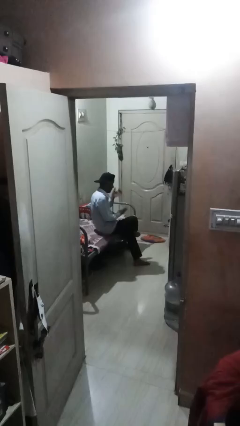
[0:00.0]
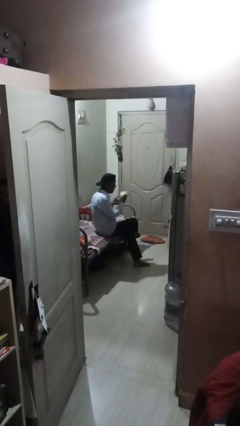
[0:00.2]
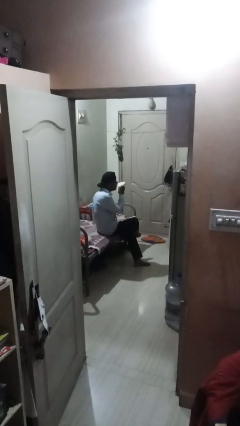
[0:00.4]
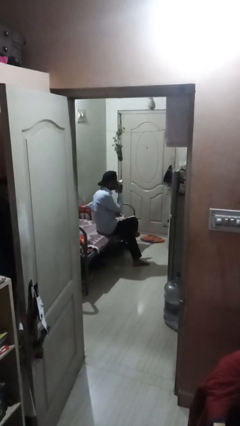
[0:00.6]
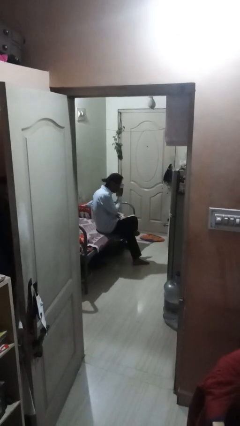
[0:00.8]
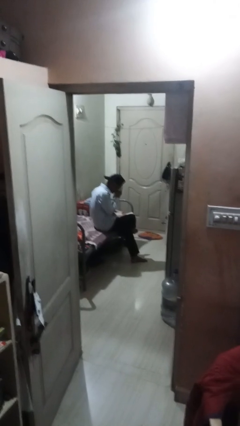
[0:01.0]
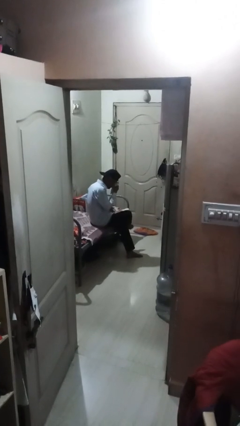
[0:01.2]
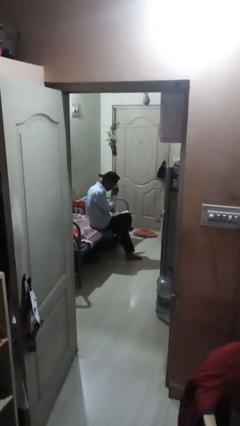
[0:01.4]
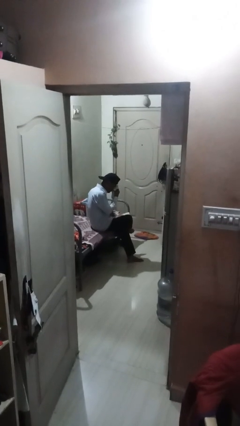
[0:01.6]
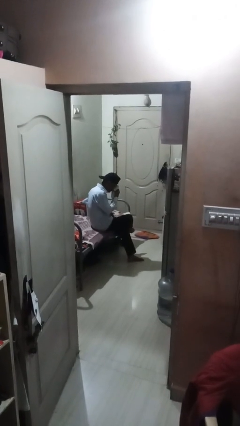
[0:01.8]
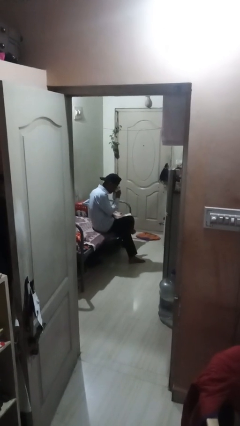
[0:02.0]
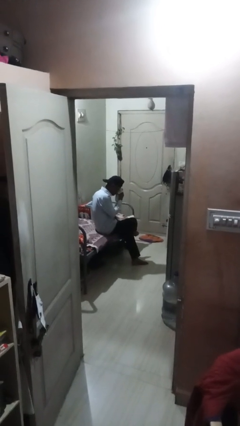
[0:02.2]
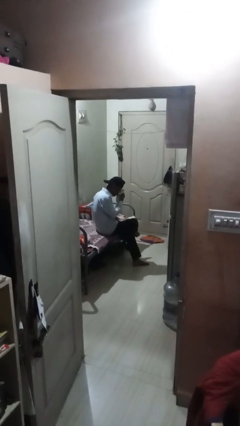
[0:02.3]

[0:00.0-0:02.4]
person blows nose

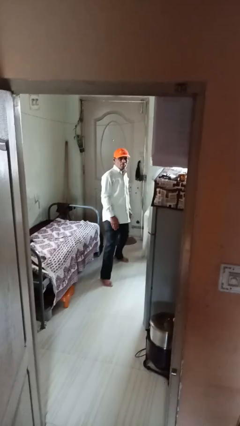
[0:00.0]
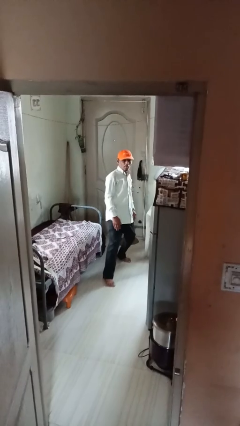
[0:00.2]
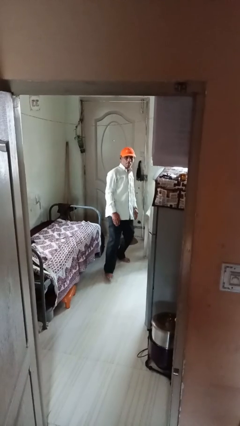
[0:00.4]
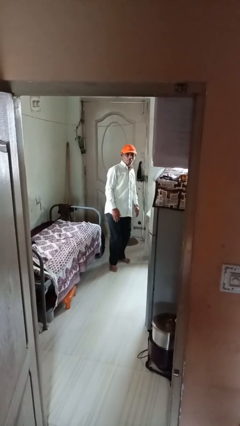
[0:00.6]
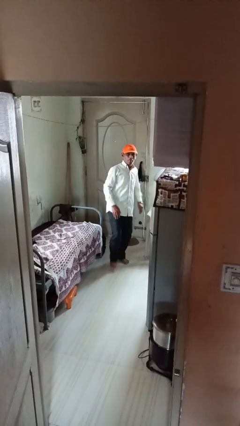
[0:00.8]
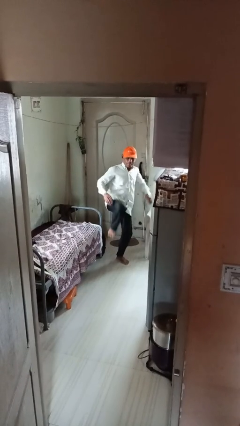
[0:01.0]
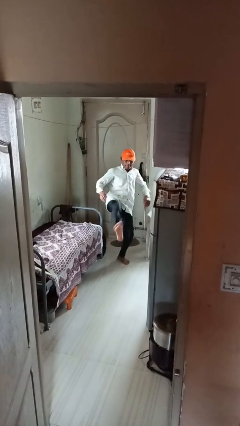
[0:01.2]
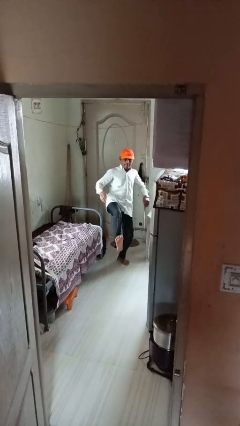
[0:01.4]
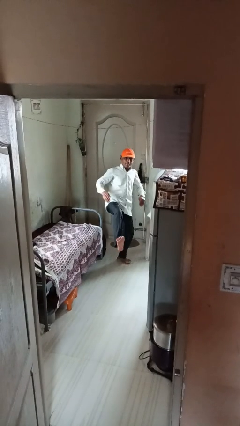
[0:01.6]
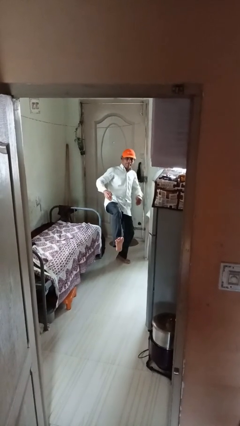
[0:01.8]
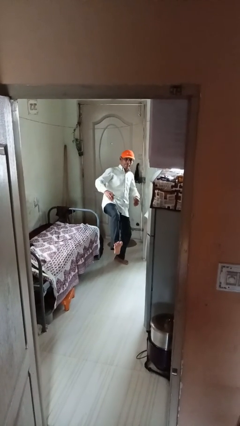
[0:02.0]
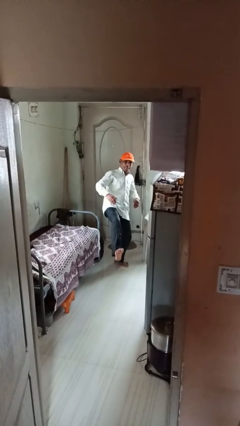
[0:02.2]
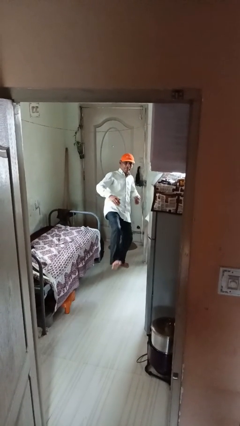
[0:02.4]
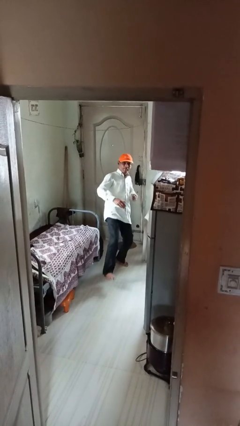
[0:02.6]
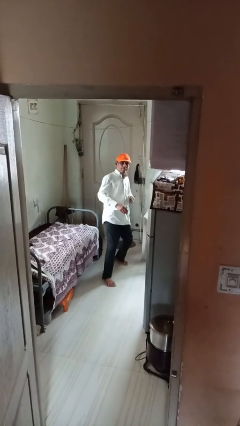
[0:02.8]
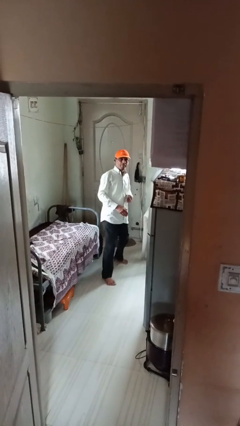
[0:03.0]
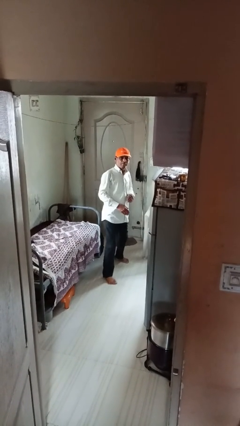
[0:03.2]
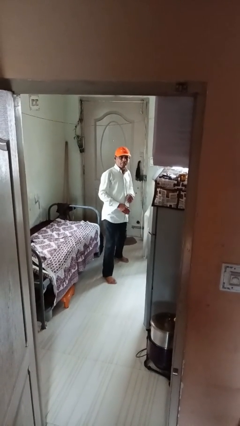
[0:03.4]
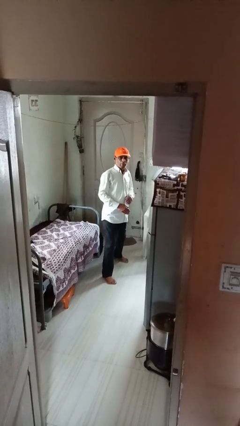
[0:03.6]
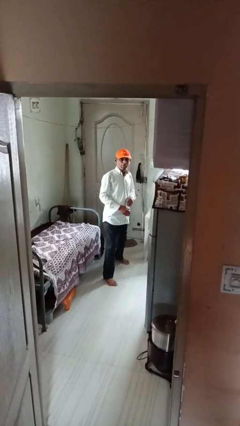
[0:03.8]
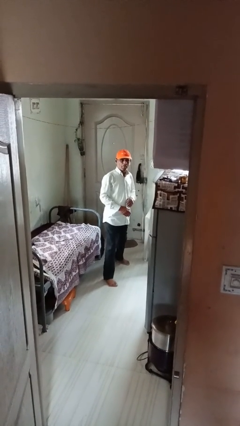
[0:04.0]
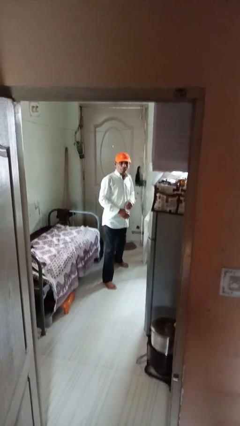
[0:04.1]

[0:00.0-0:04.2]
person karate kicks

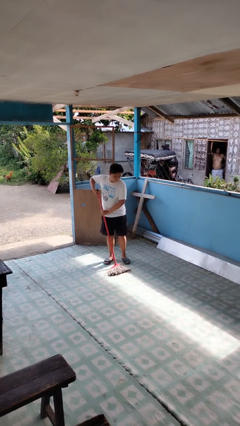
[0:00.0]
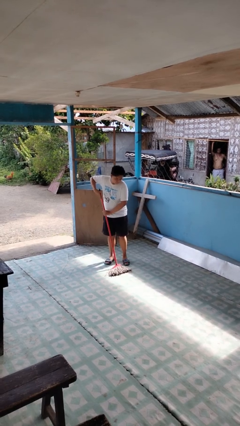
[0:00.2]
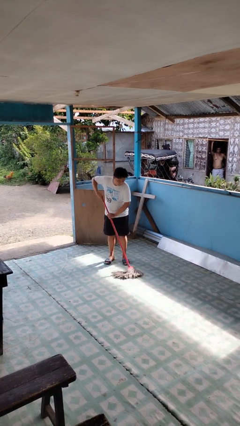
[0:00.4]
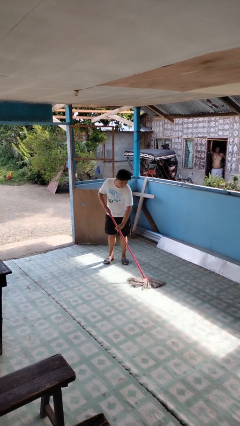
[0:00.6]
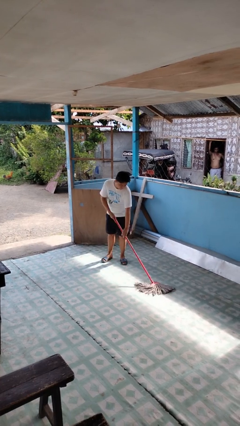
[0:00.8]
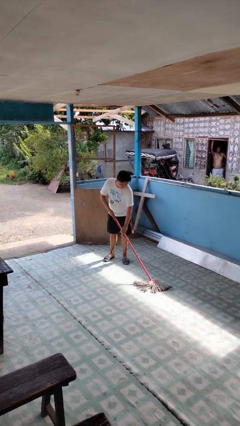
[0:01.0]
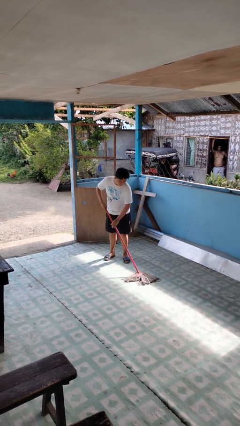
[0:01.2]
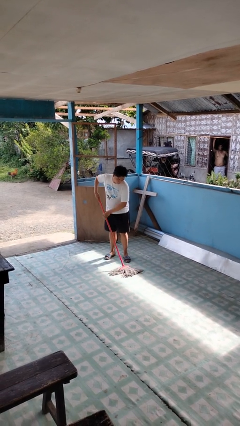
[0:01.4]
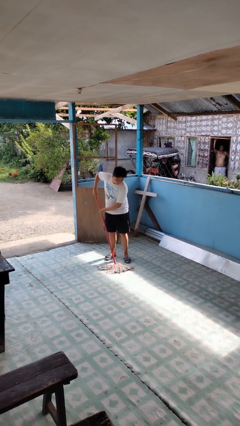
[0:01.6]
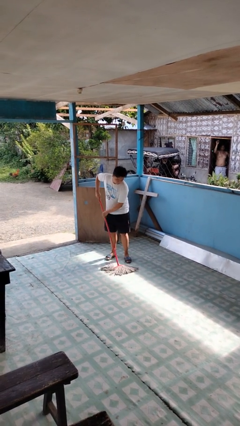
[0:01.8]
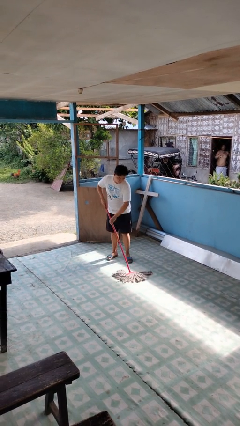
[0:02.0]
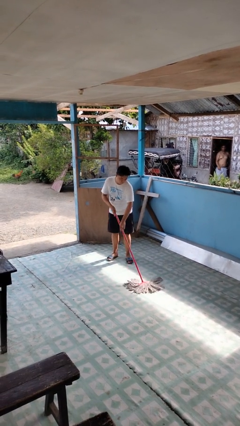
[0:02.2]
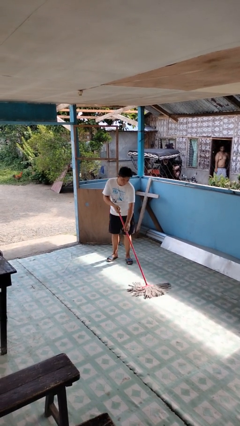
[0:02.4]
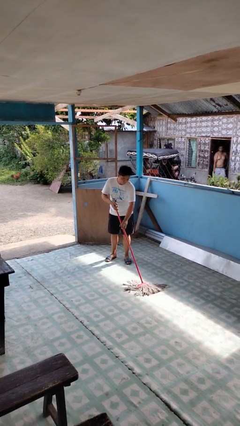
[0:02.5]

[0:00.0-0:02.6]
person mops

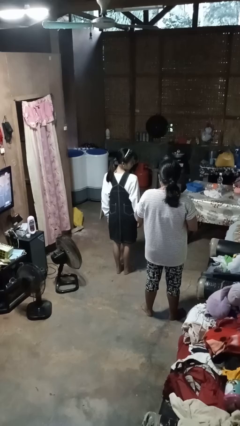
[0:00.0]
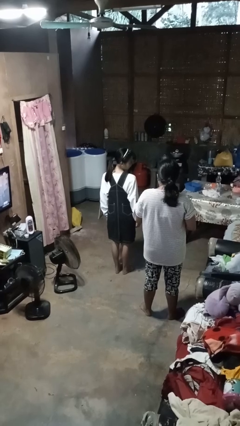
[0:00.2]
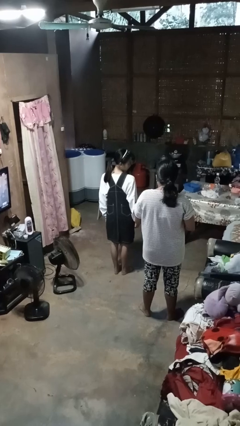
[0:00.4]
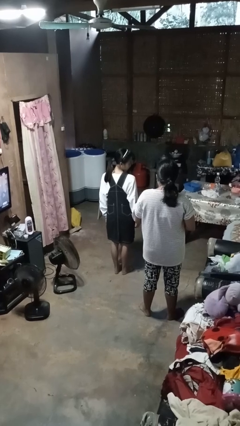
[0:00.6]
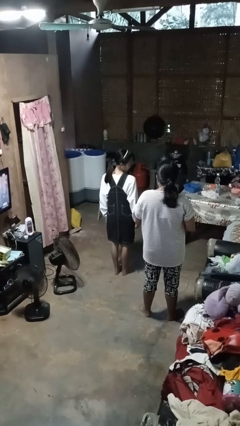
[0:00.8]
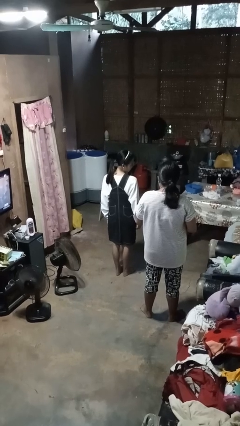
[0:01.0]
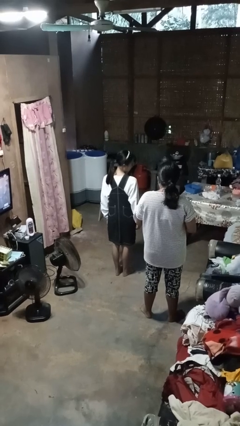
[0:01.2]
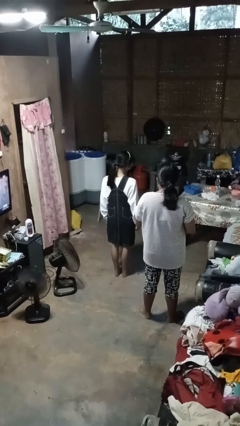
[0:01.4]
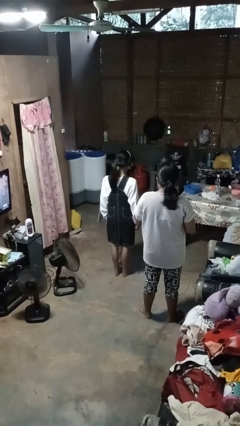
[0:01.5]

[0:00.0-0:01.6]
person looks over shoulder

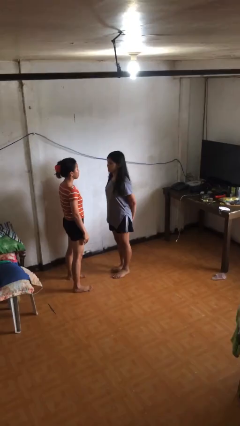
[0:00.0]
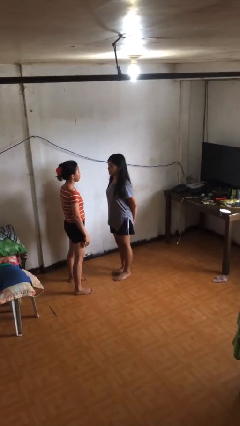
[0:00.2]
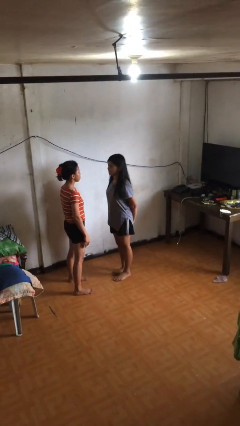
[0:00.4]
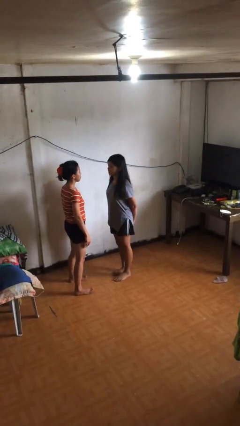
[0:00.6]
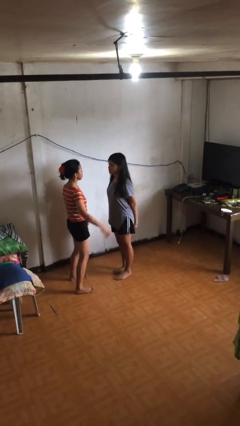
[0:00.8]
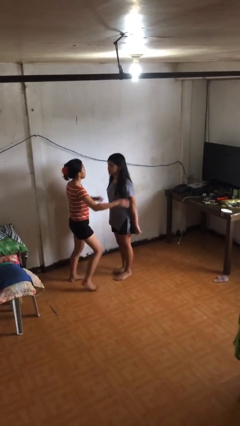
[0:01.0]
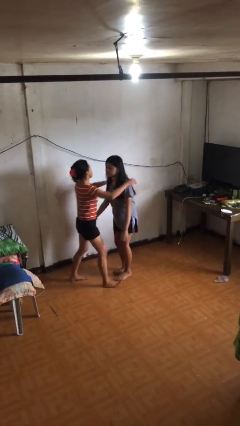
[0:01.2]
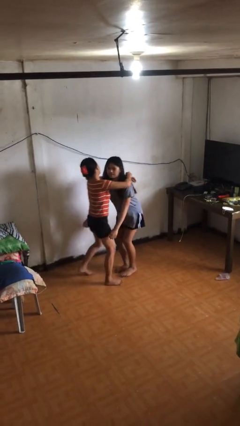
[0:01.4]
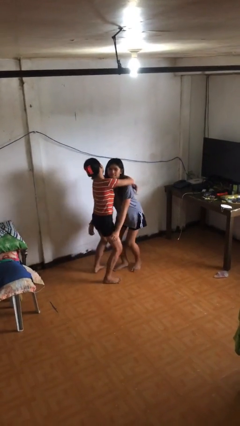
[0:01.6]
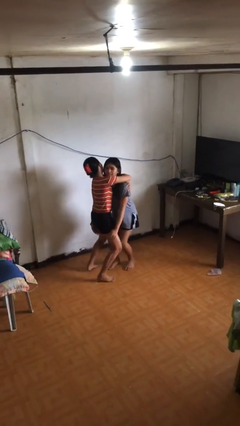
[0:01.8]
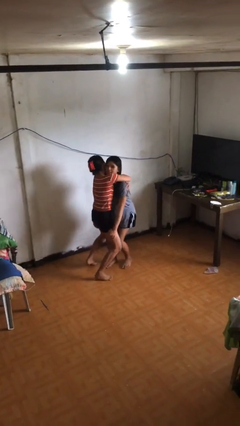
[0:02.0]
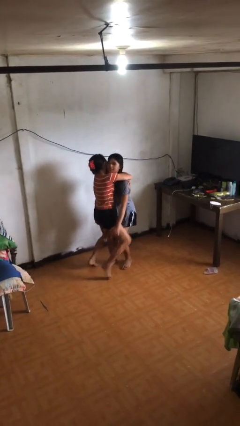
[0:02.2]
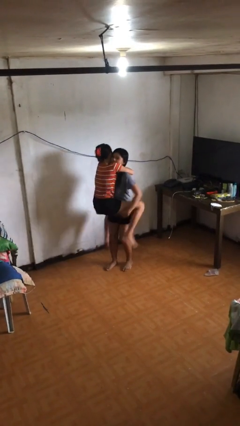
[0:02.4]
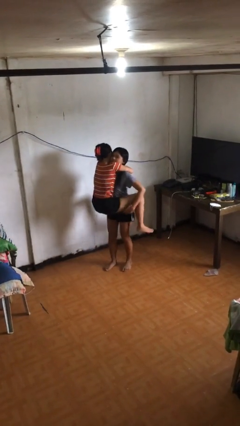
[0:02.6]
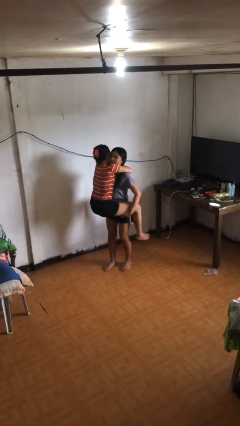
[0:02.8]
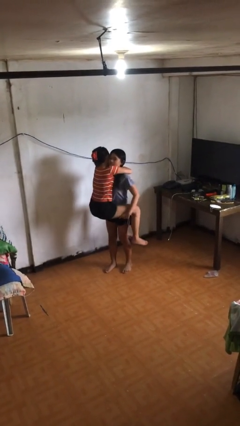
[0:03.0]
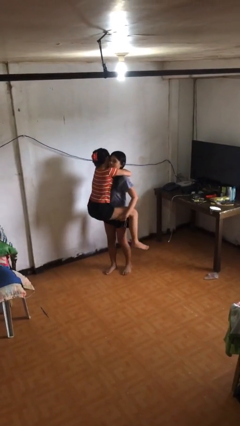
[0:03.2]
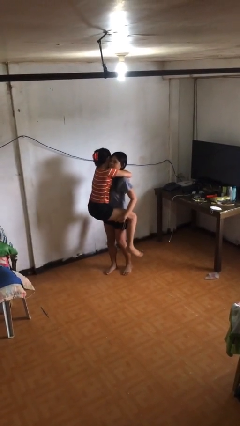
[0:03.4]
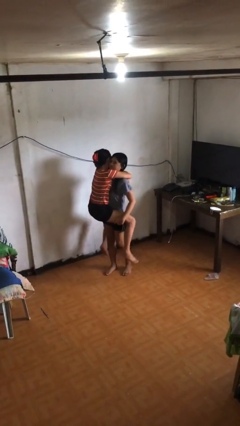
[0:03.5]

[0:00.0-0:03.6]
person picks up person

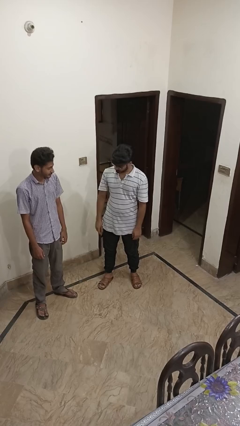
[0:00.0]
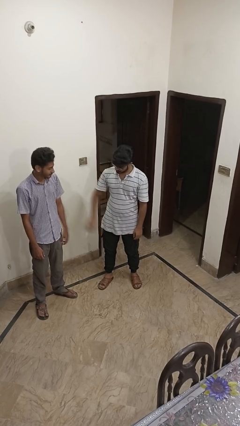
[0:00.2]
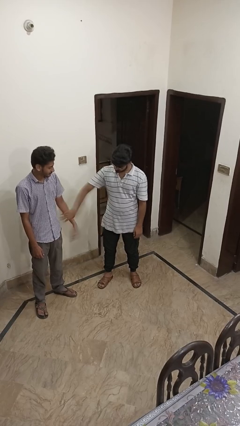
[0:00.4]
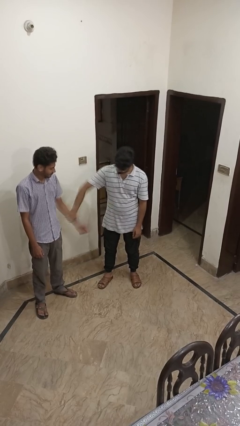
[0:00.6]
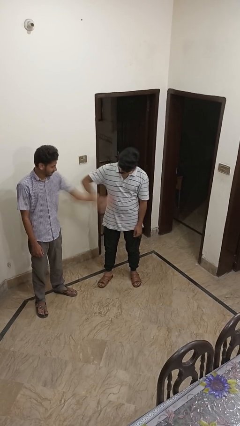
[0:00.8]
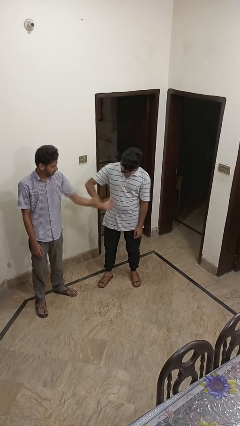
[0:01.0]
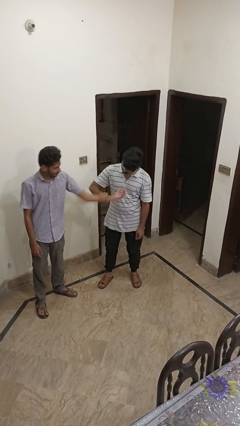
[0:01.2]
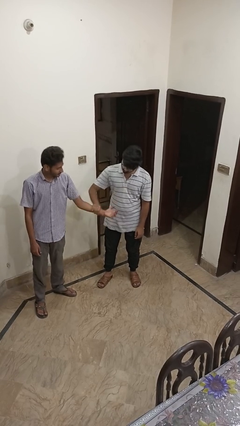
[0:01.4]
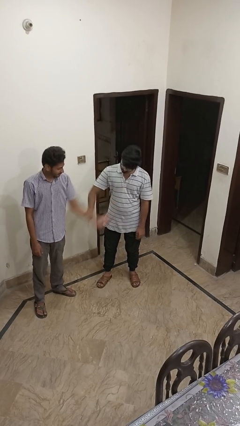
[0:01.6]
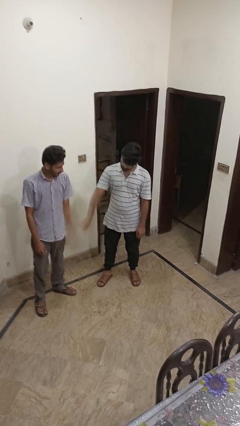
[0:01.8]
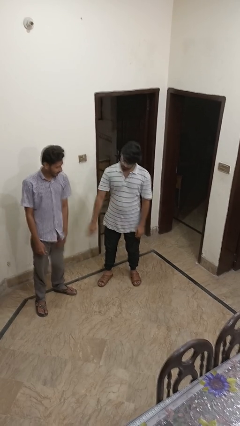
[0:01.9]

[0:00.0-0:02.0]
person grabs person by forearm

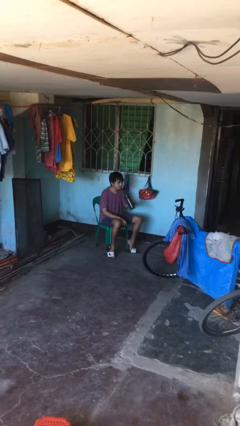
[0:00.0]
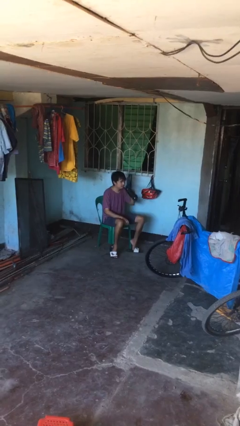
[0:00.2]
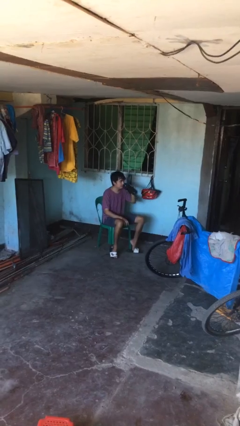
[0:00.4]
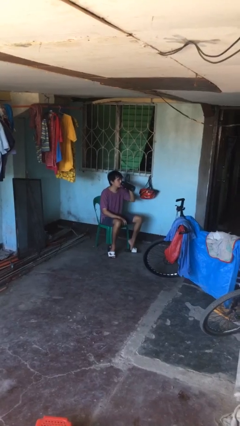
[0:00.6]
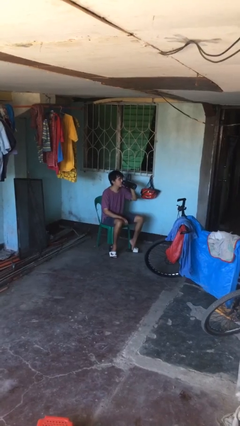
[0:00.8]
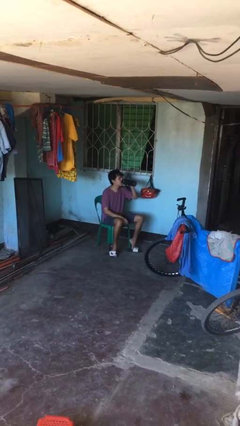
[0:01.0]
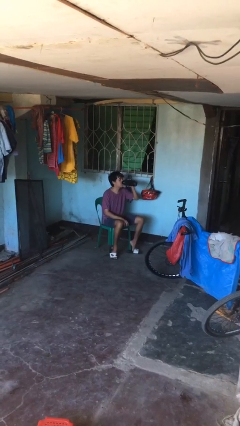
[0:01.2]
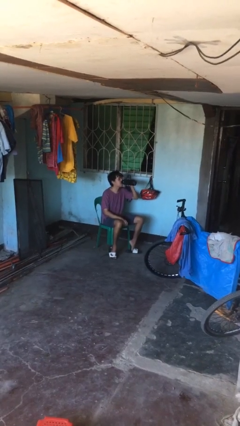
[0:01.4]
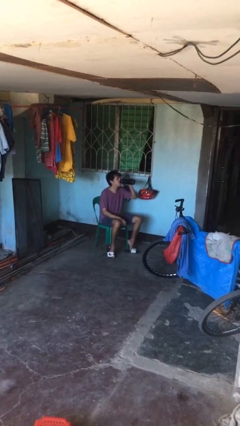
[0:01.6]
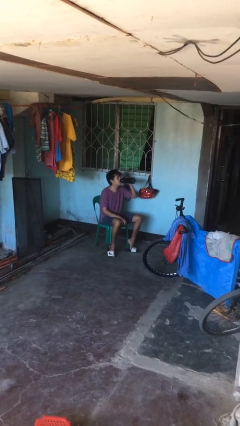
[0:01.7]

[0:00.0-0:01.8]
person drinks from bottle
